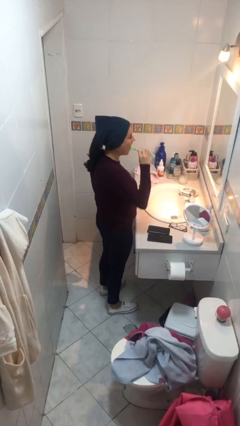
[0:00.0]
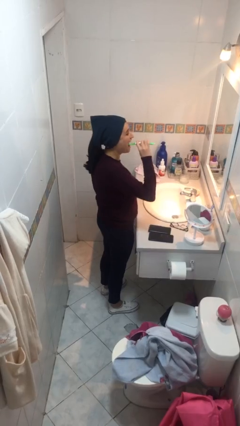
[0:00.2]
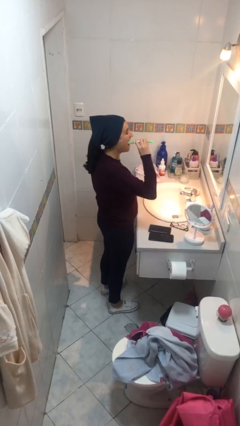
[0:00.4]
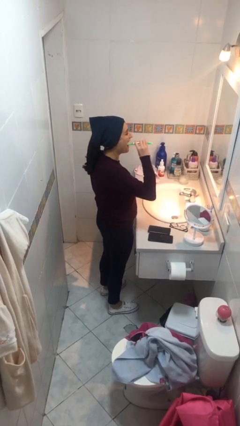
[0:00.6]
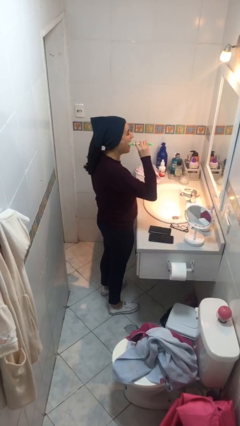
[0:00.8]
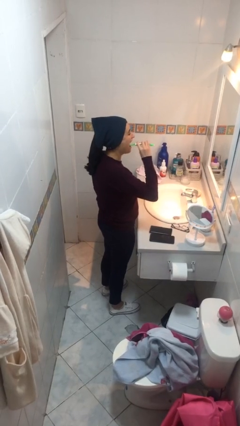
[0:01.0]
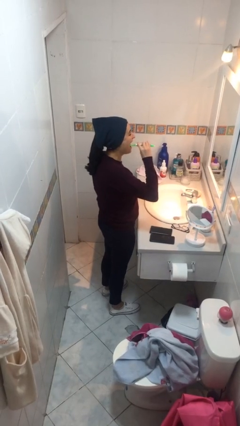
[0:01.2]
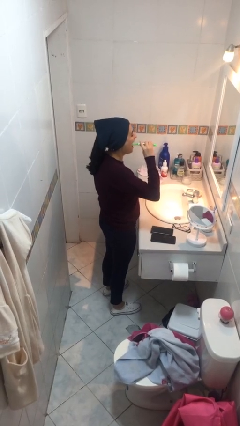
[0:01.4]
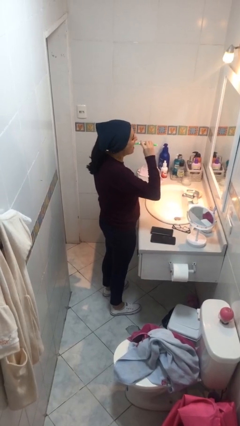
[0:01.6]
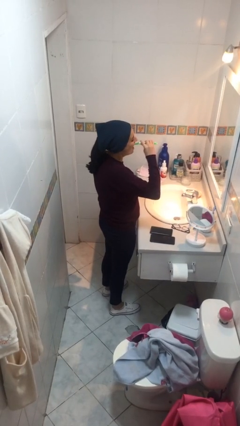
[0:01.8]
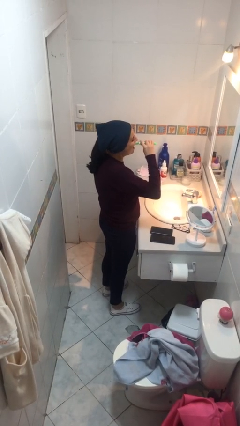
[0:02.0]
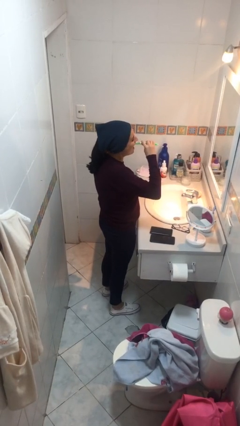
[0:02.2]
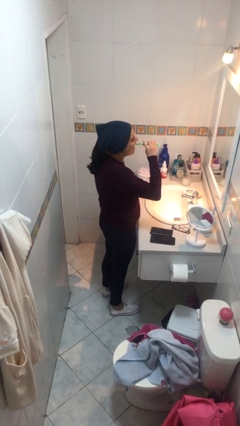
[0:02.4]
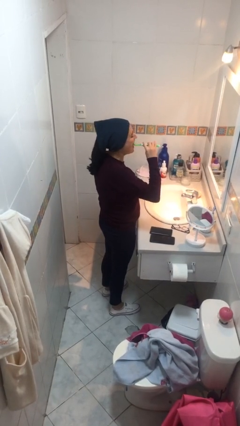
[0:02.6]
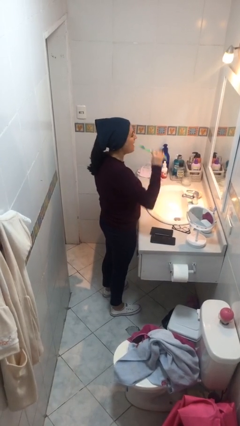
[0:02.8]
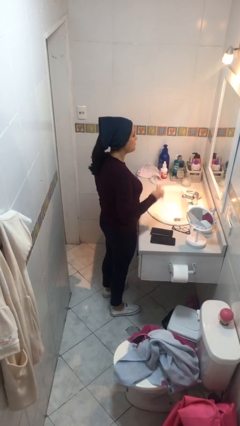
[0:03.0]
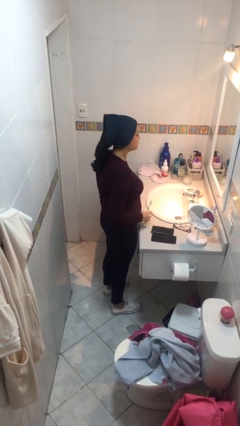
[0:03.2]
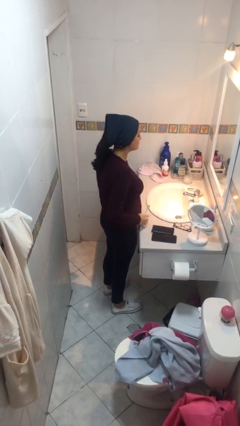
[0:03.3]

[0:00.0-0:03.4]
person brushes teeth

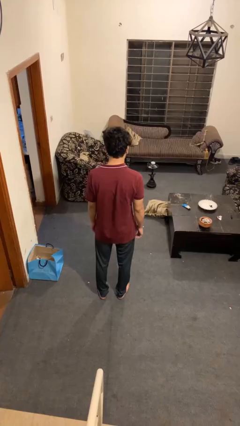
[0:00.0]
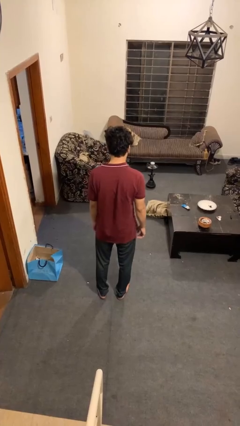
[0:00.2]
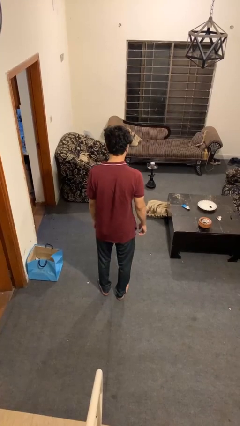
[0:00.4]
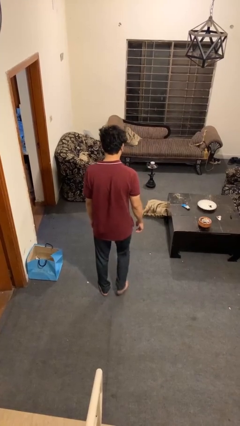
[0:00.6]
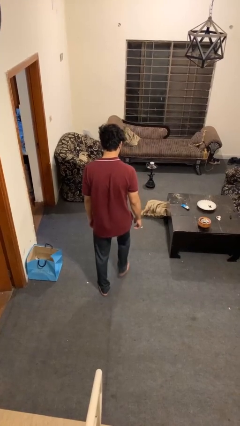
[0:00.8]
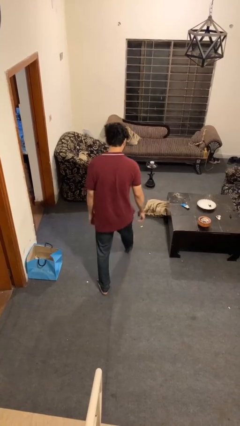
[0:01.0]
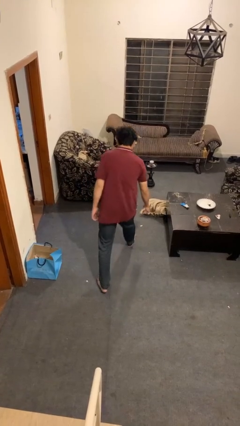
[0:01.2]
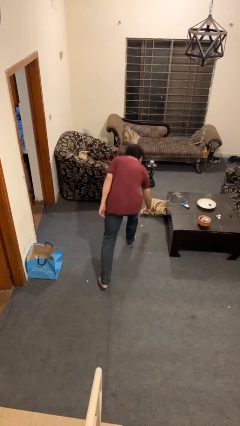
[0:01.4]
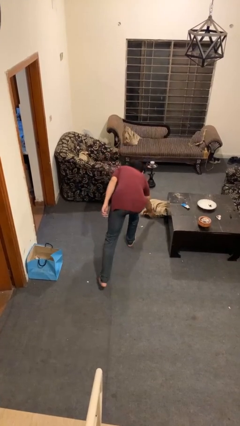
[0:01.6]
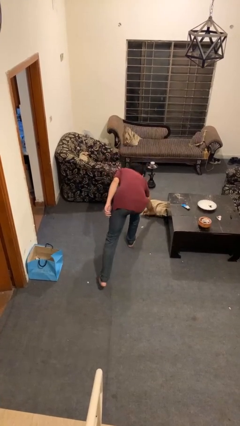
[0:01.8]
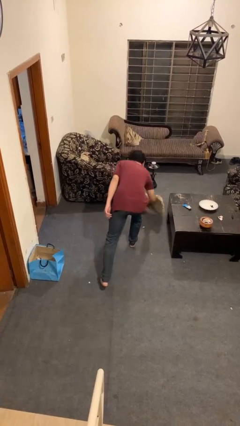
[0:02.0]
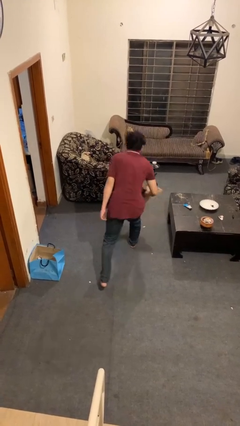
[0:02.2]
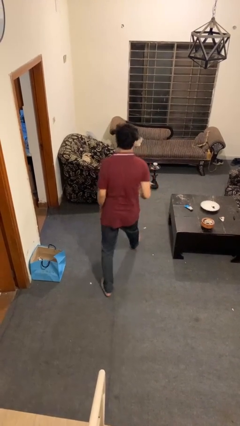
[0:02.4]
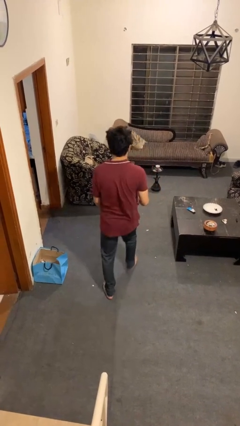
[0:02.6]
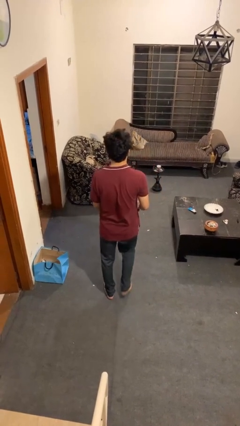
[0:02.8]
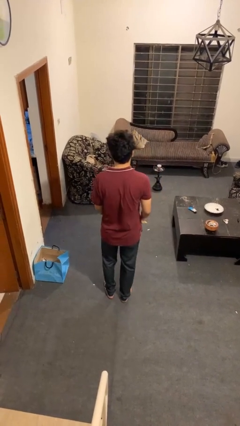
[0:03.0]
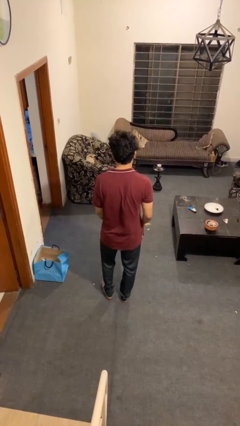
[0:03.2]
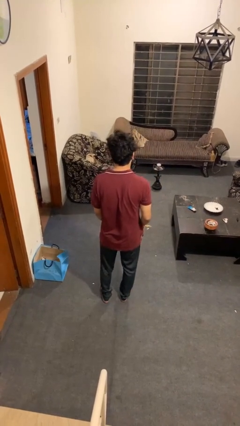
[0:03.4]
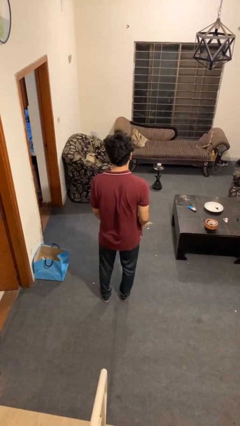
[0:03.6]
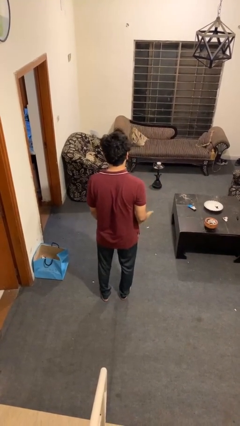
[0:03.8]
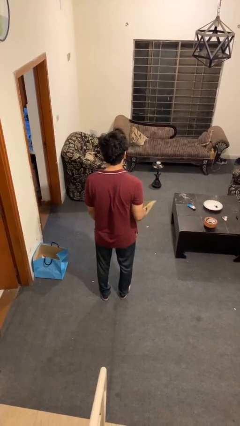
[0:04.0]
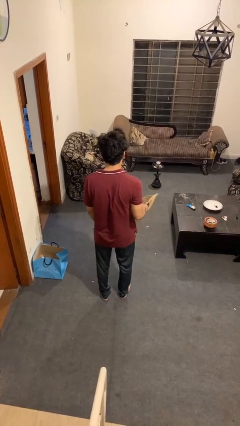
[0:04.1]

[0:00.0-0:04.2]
person picks up object from floor

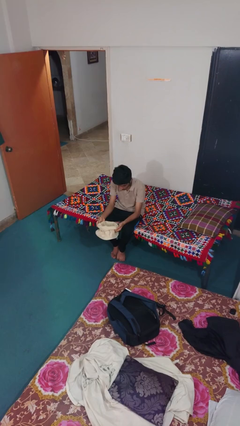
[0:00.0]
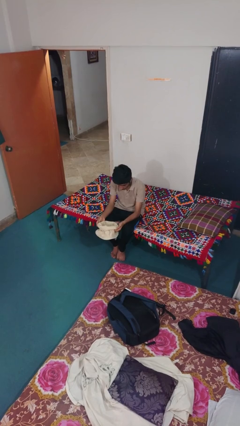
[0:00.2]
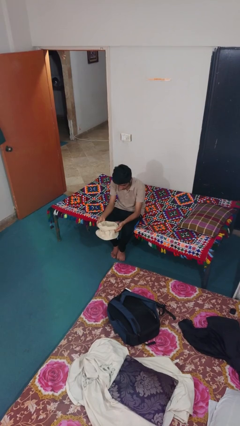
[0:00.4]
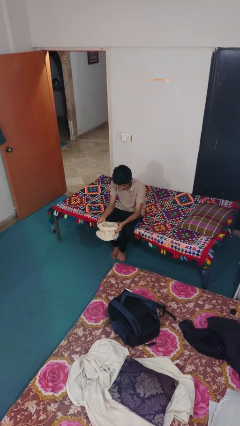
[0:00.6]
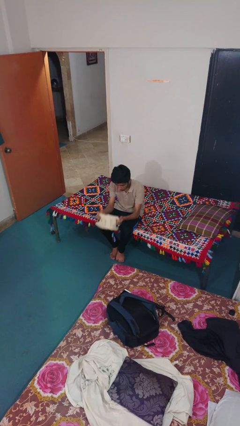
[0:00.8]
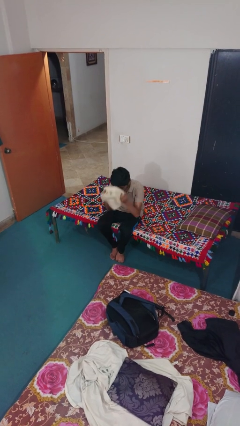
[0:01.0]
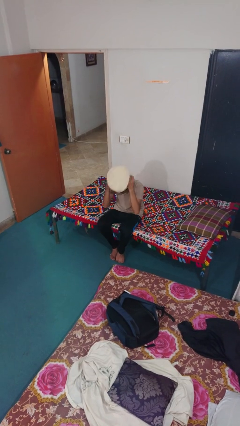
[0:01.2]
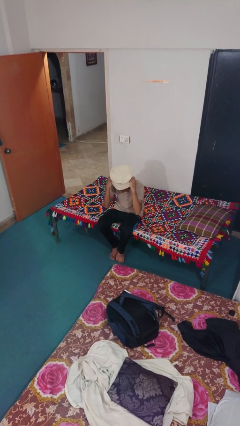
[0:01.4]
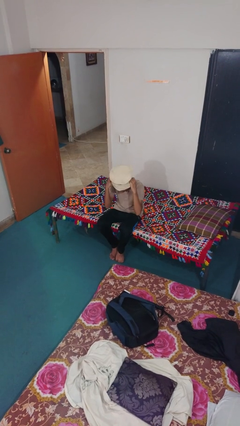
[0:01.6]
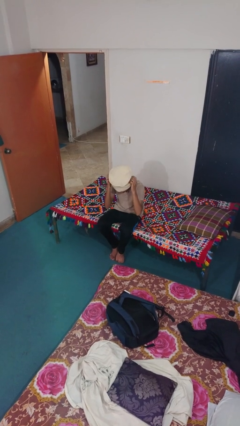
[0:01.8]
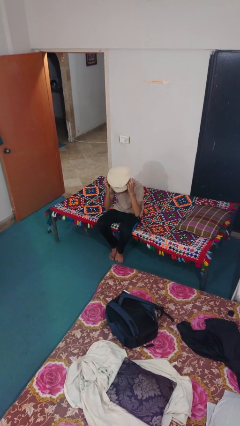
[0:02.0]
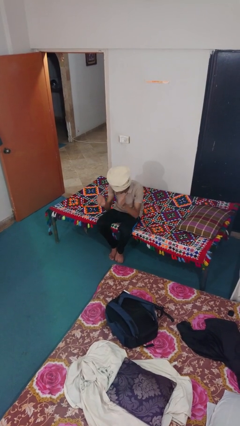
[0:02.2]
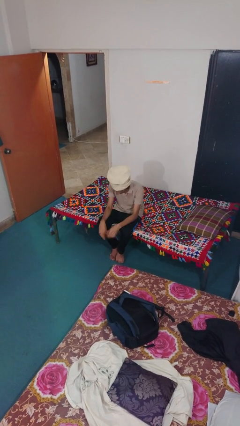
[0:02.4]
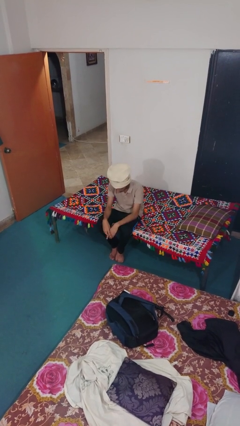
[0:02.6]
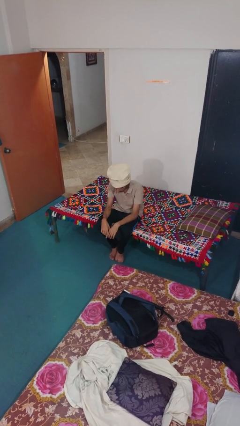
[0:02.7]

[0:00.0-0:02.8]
person puts on hat

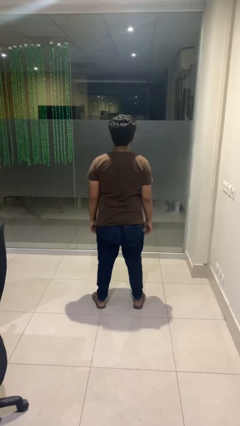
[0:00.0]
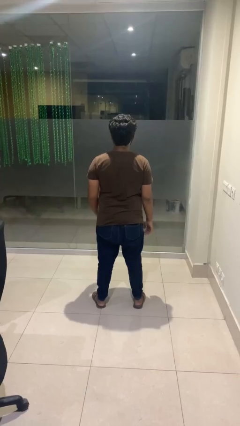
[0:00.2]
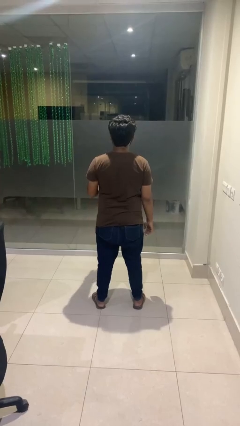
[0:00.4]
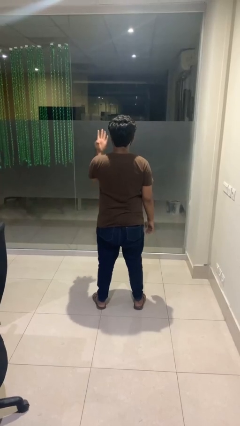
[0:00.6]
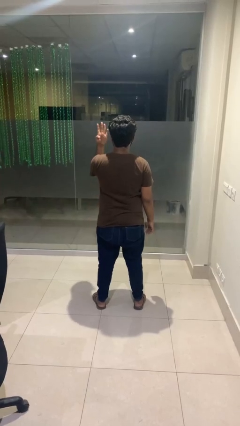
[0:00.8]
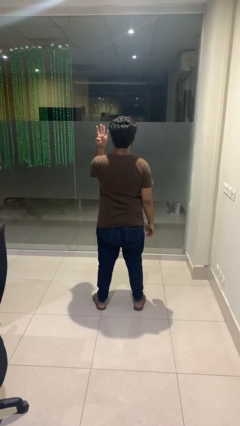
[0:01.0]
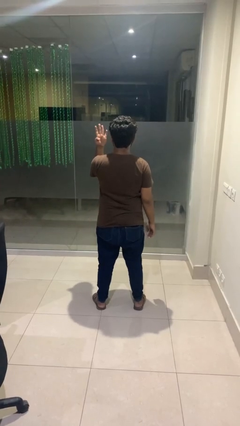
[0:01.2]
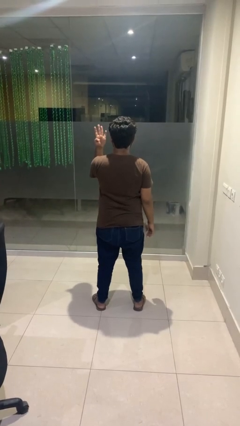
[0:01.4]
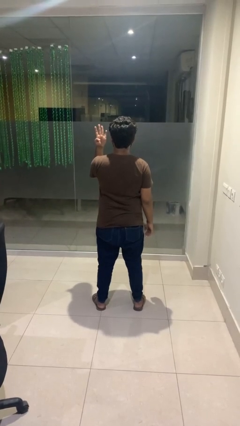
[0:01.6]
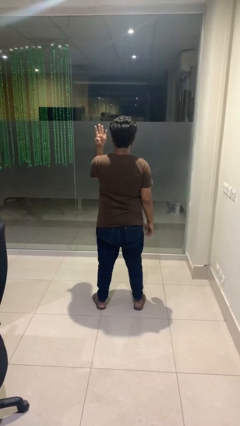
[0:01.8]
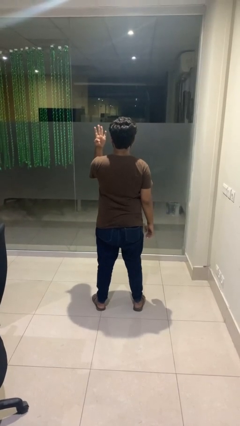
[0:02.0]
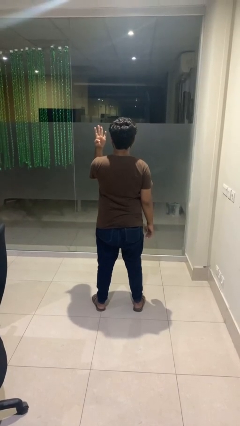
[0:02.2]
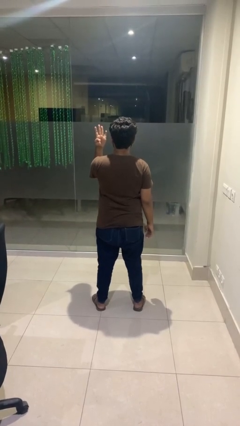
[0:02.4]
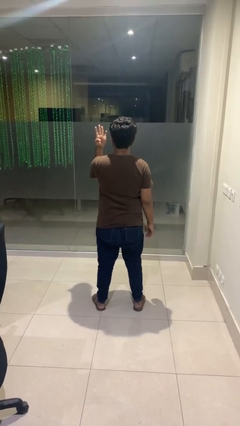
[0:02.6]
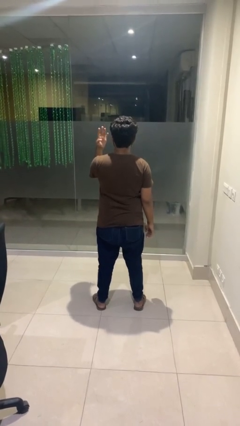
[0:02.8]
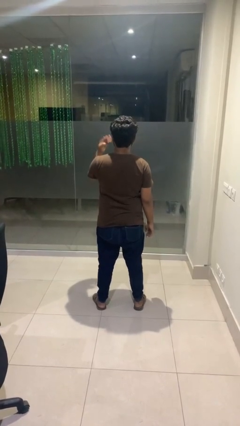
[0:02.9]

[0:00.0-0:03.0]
person gestures number four

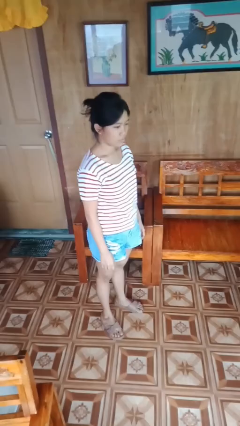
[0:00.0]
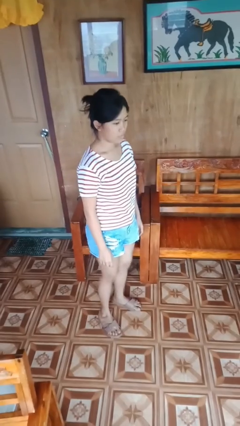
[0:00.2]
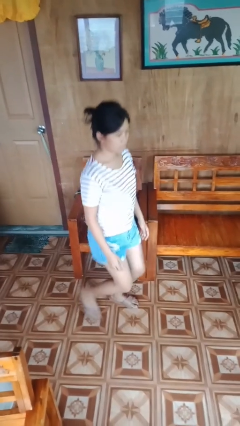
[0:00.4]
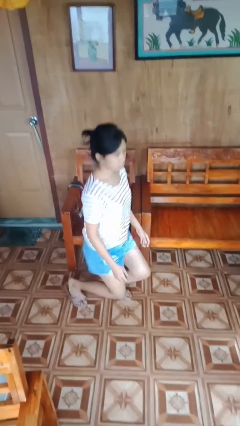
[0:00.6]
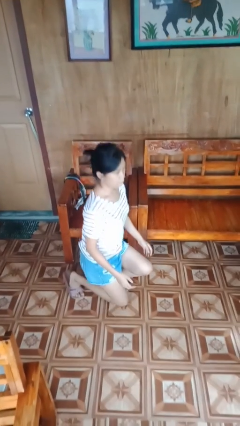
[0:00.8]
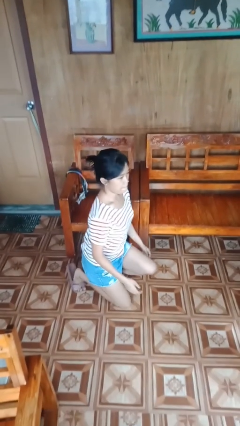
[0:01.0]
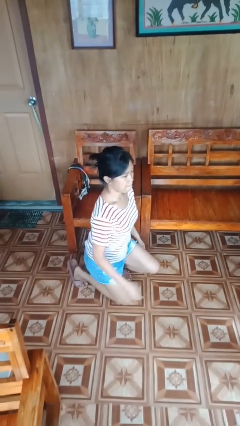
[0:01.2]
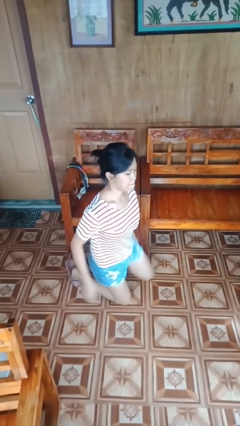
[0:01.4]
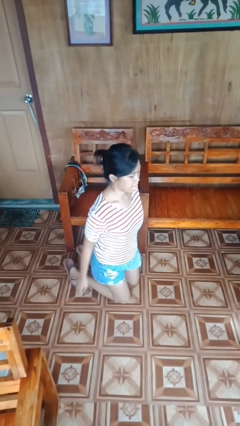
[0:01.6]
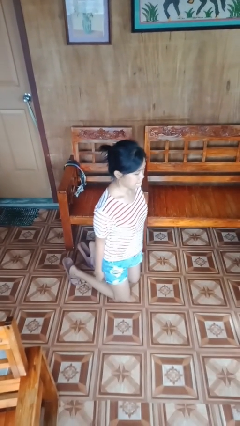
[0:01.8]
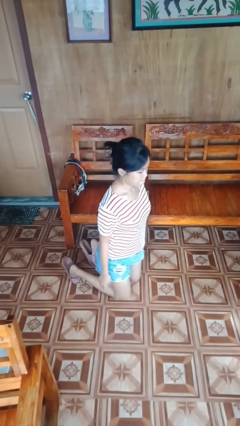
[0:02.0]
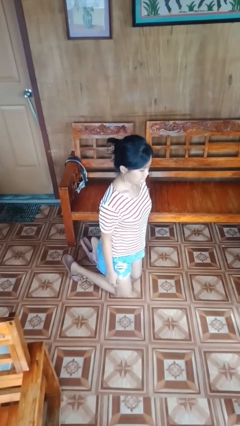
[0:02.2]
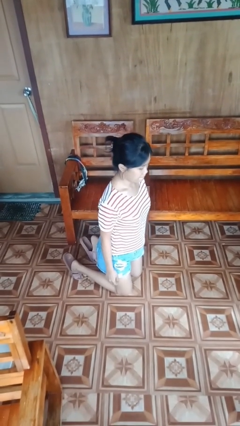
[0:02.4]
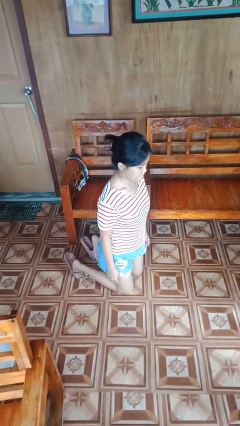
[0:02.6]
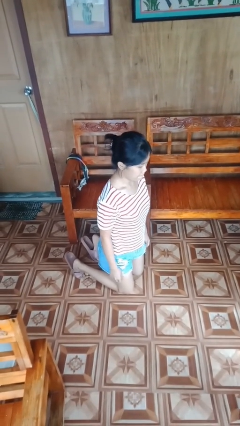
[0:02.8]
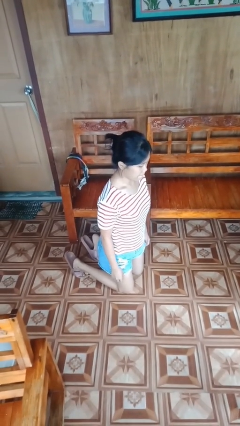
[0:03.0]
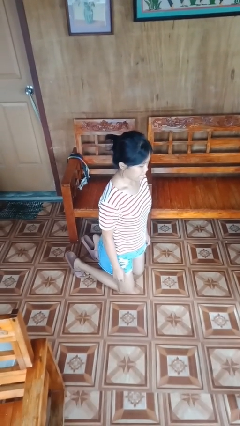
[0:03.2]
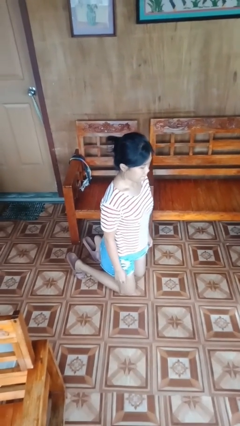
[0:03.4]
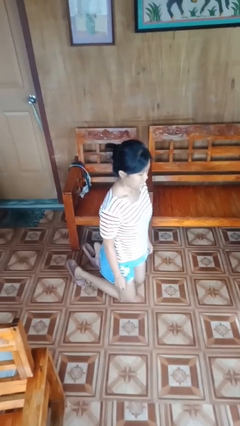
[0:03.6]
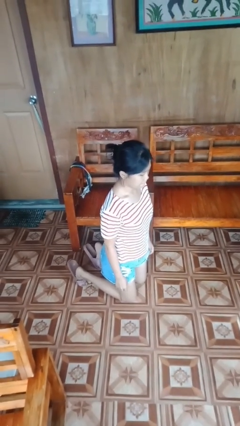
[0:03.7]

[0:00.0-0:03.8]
person kneels

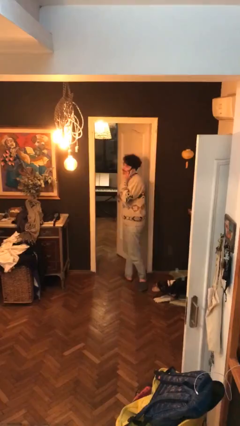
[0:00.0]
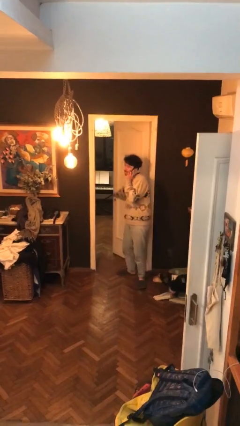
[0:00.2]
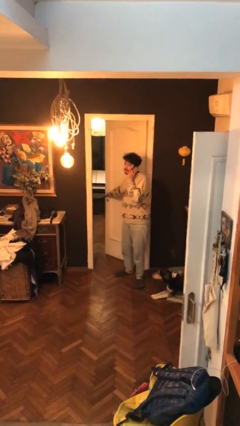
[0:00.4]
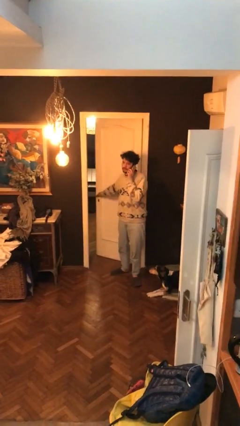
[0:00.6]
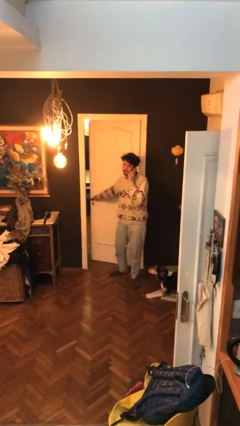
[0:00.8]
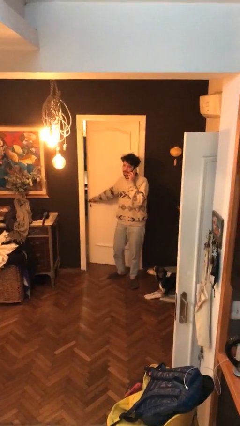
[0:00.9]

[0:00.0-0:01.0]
person closes facility door
